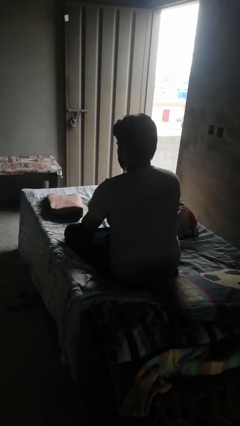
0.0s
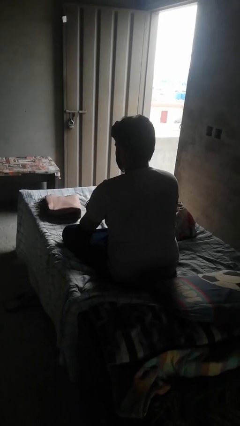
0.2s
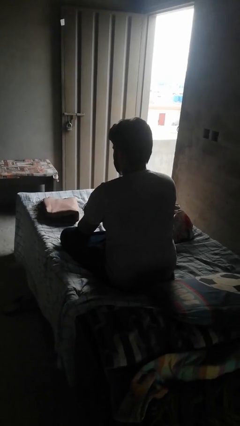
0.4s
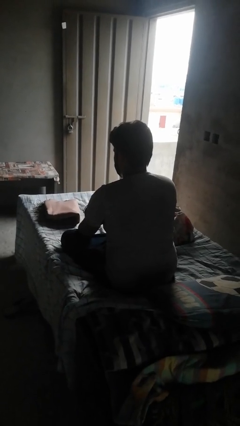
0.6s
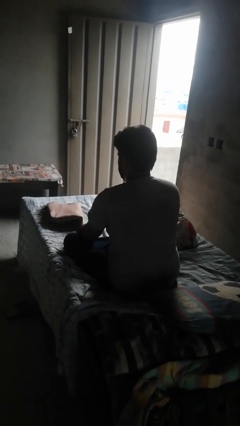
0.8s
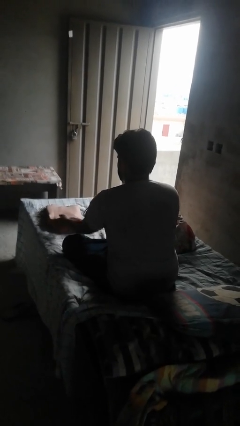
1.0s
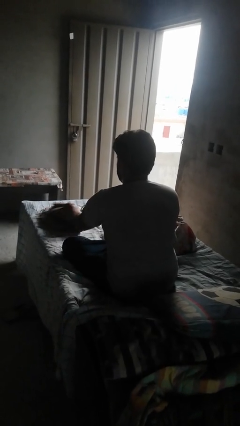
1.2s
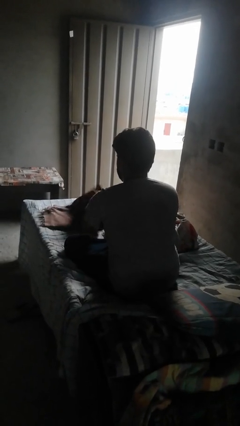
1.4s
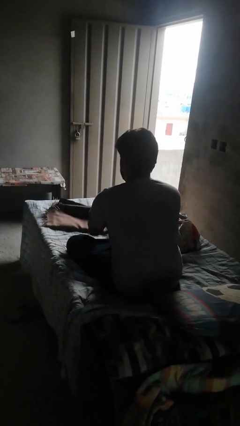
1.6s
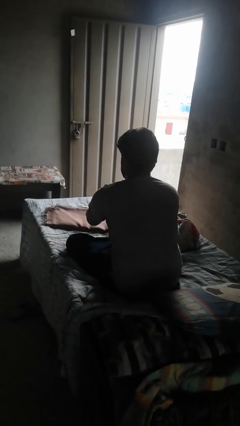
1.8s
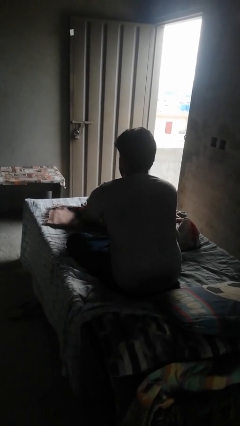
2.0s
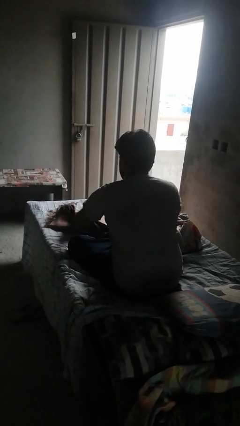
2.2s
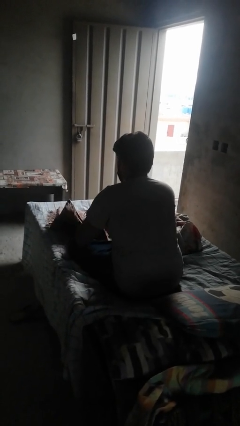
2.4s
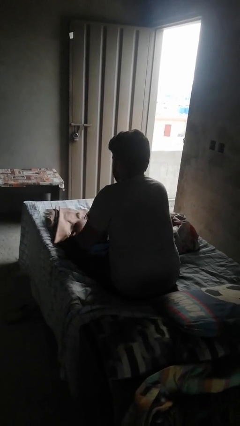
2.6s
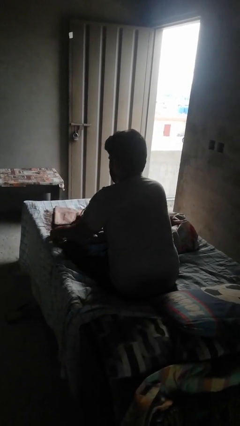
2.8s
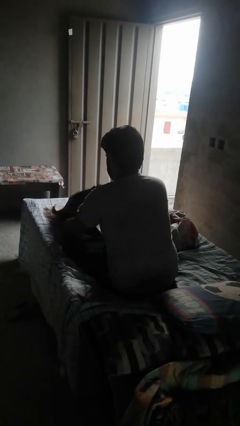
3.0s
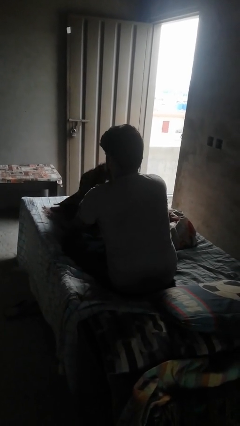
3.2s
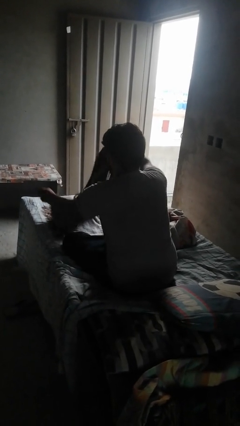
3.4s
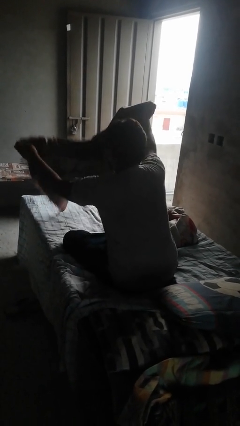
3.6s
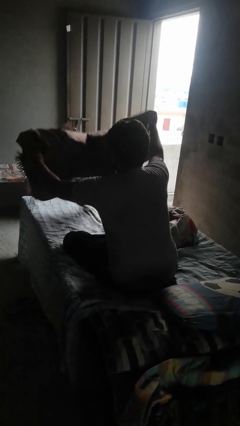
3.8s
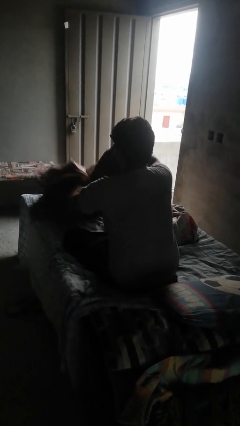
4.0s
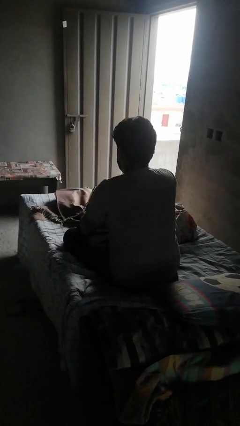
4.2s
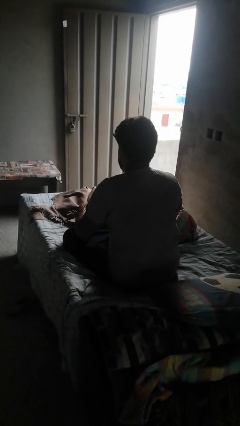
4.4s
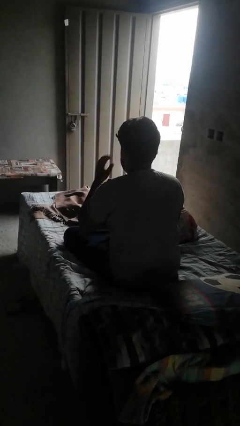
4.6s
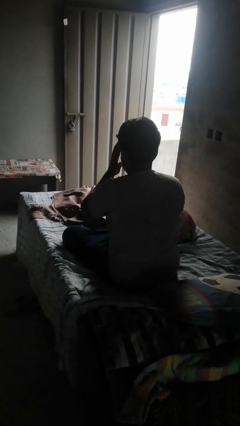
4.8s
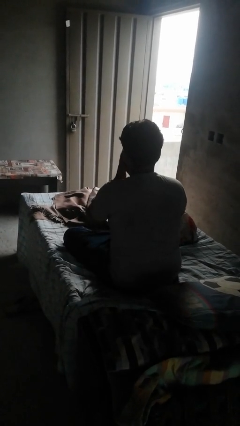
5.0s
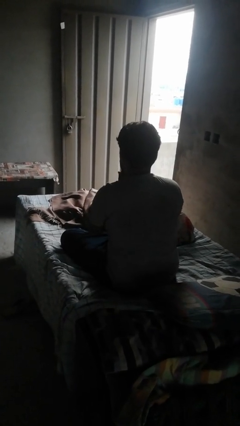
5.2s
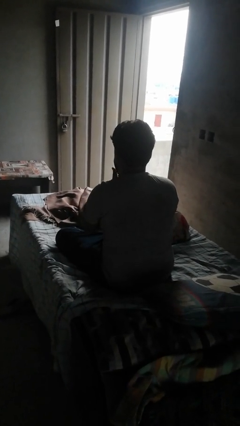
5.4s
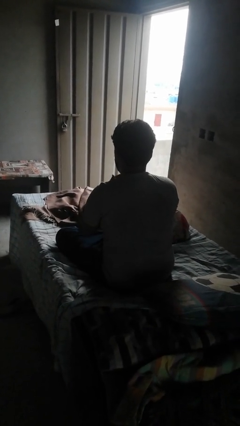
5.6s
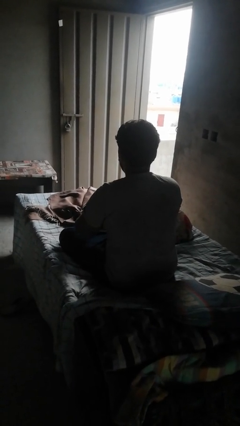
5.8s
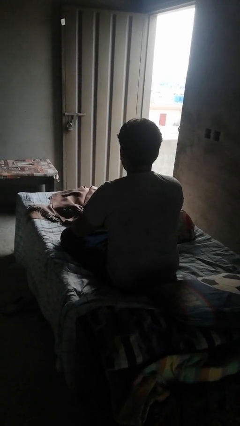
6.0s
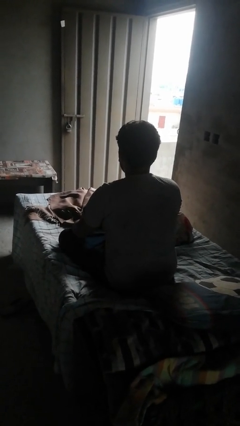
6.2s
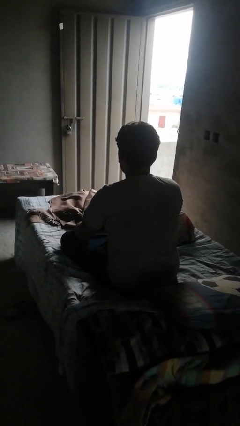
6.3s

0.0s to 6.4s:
person unfolds blanket

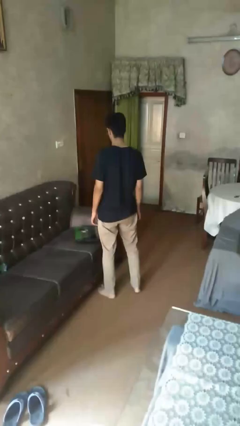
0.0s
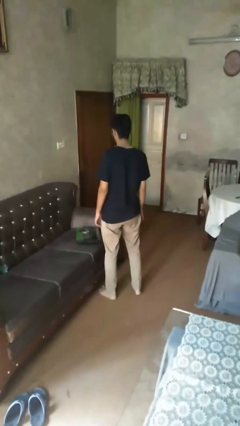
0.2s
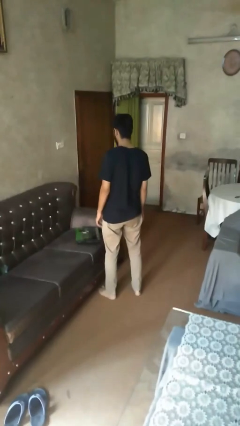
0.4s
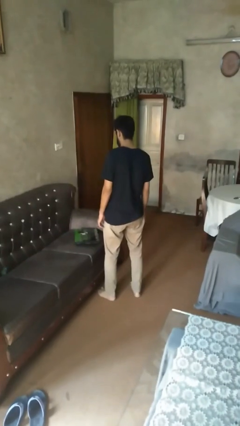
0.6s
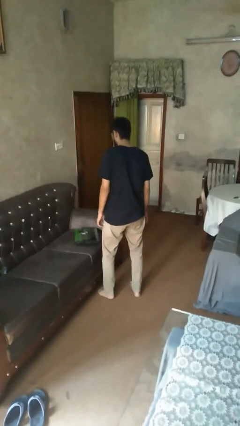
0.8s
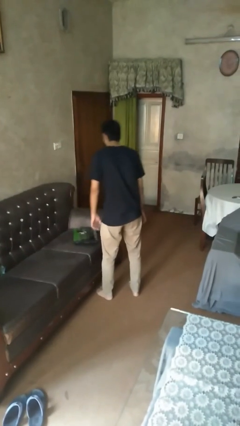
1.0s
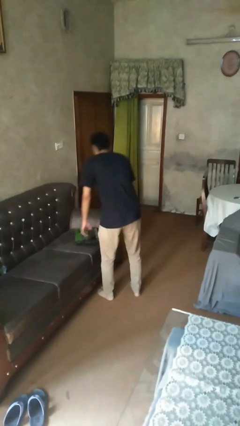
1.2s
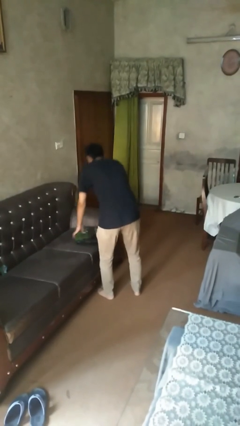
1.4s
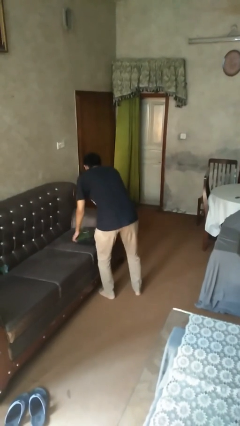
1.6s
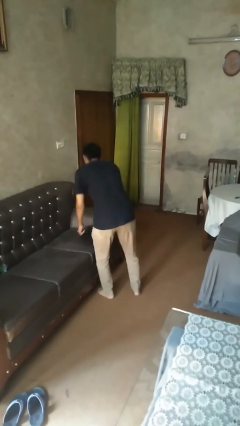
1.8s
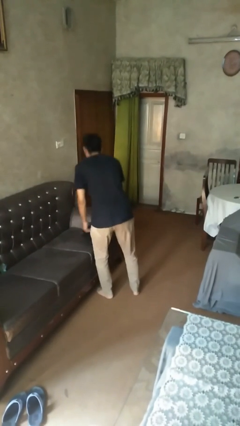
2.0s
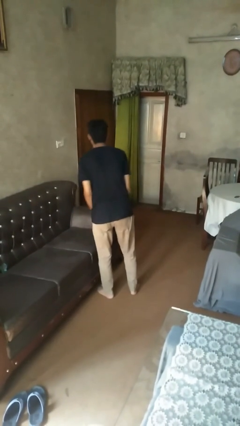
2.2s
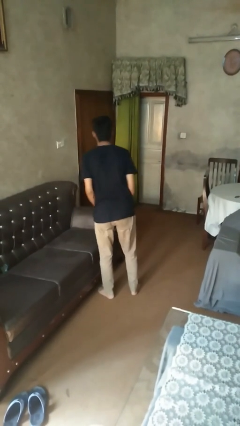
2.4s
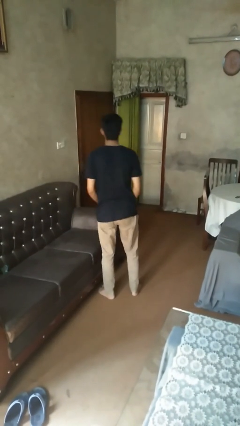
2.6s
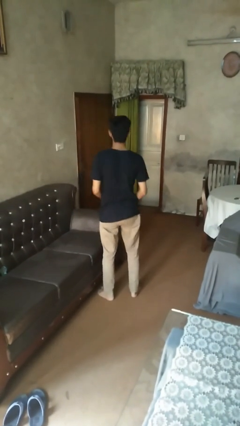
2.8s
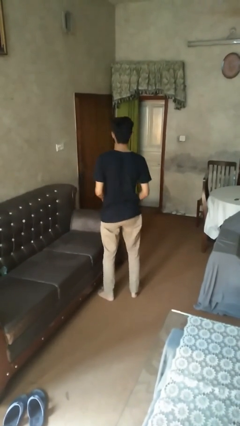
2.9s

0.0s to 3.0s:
person picks up object from couch

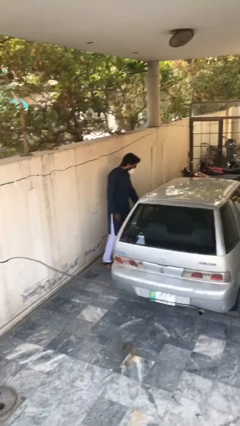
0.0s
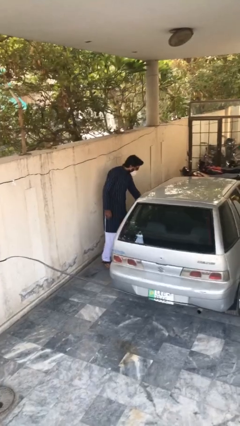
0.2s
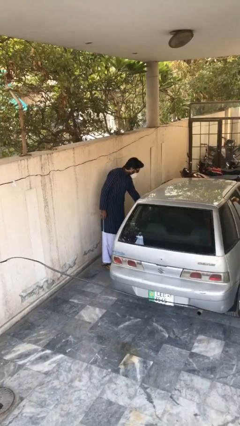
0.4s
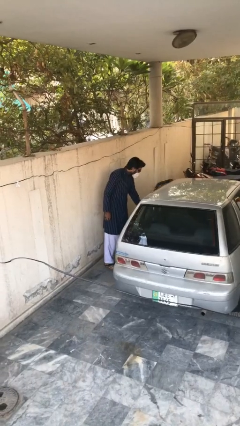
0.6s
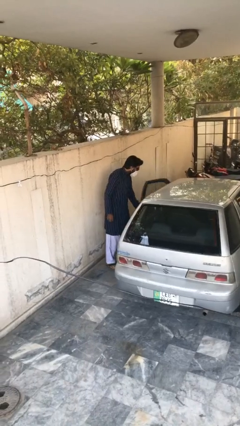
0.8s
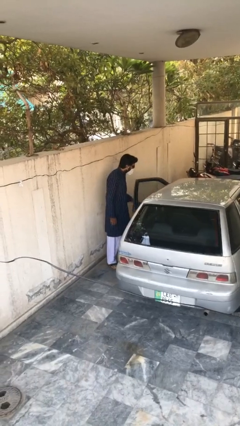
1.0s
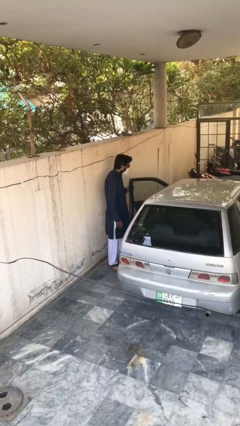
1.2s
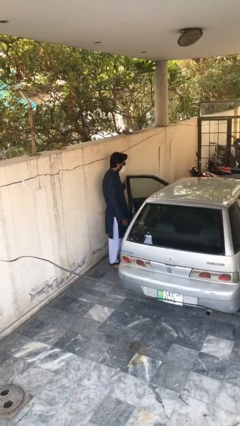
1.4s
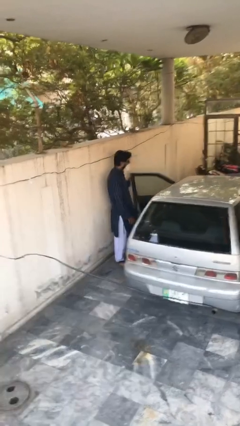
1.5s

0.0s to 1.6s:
person opens car door

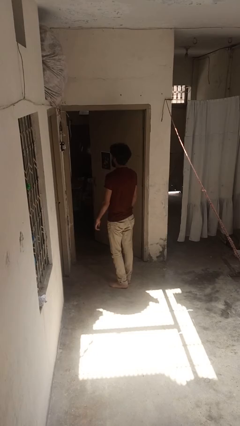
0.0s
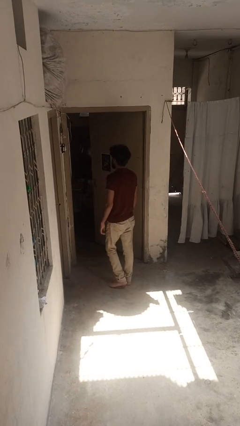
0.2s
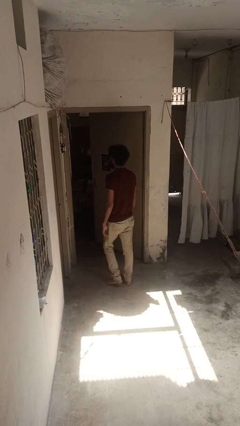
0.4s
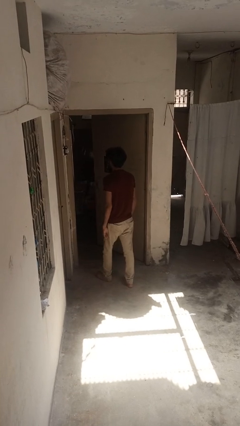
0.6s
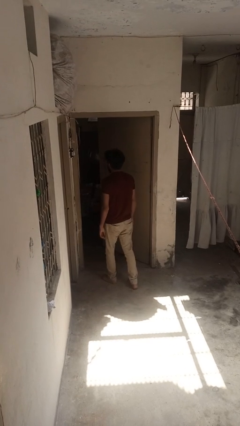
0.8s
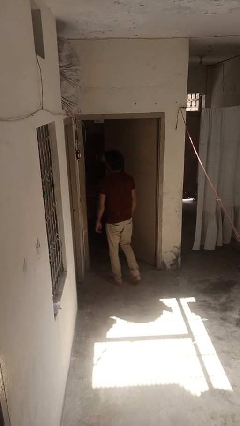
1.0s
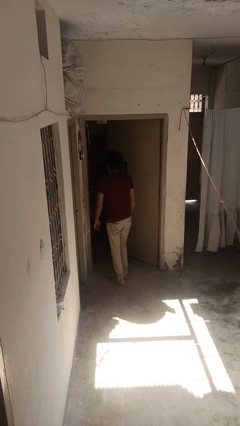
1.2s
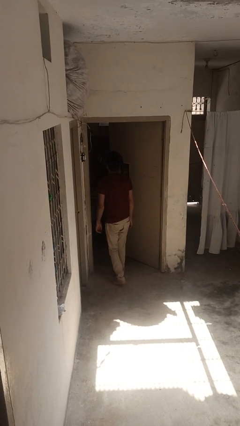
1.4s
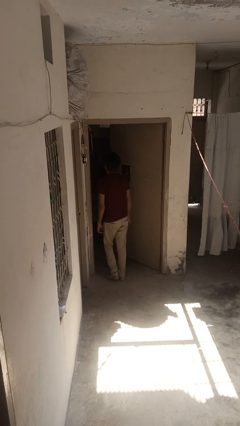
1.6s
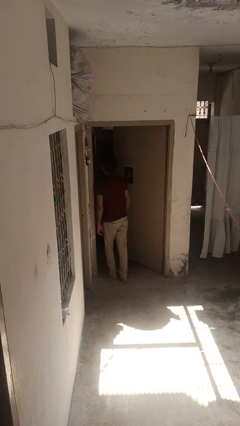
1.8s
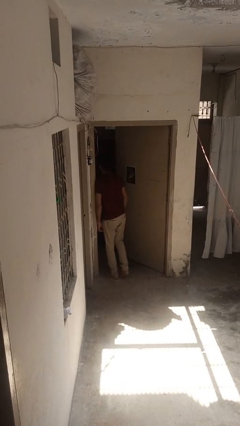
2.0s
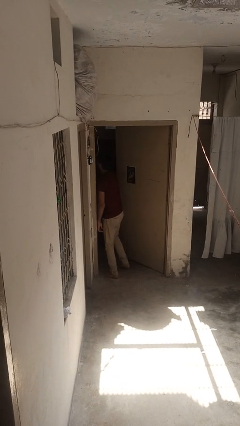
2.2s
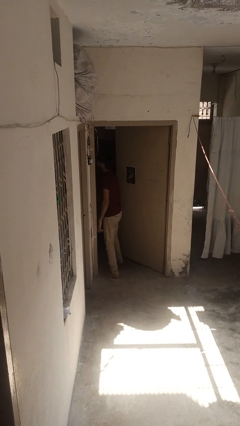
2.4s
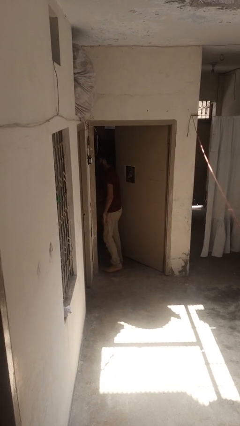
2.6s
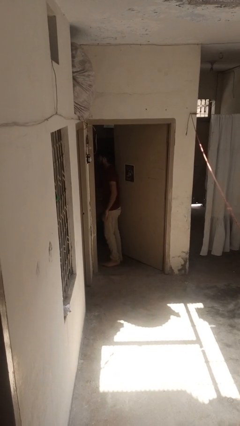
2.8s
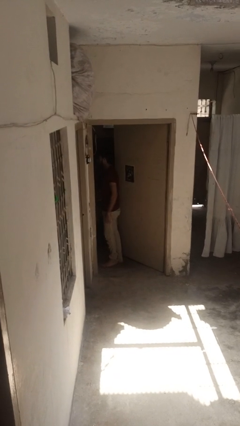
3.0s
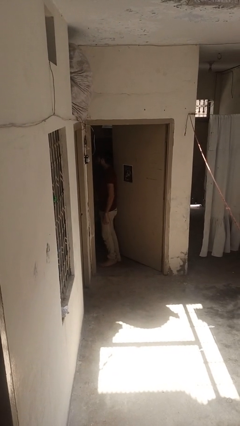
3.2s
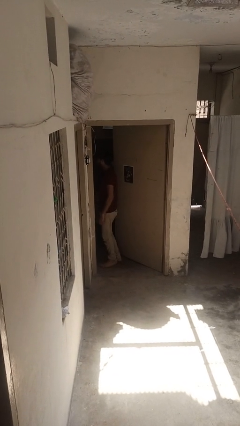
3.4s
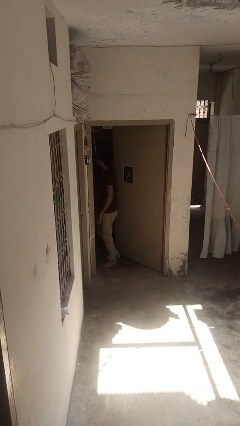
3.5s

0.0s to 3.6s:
person bumps into wall

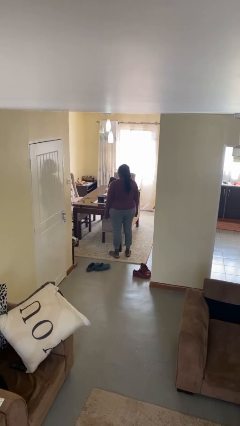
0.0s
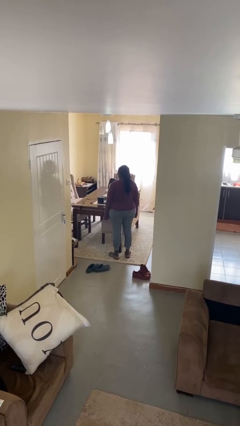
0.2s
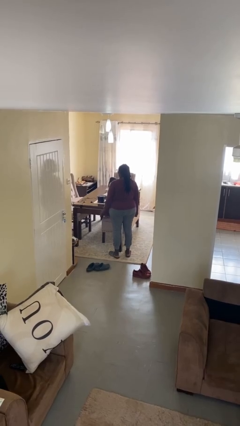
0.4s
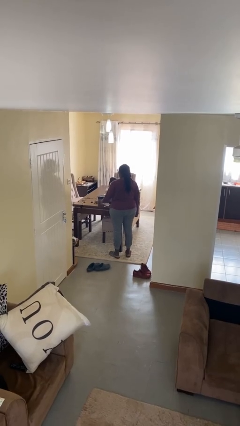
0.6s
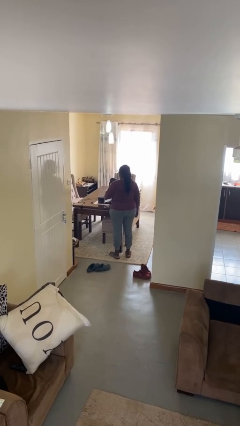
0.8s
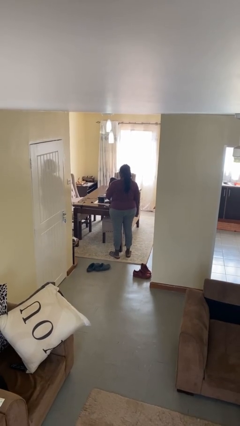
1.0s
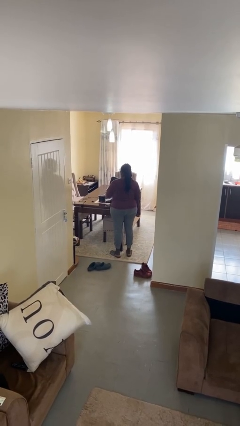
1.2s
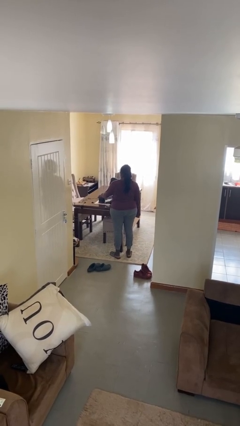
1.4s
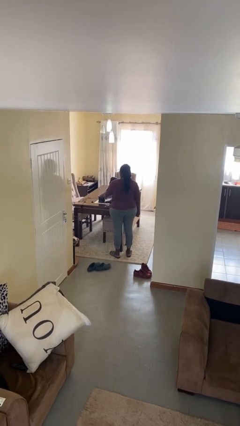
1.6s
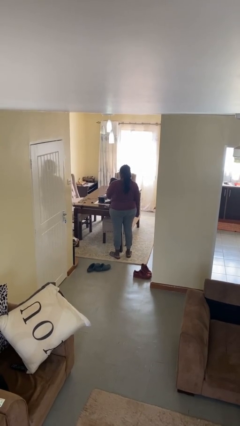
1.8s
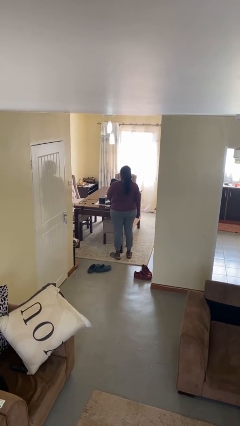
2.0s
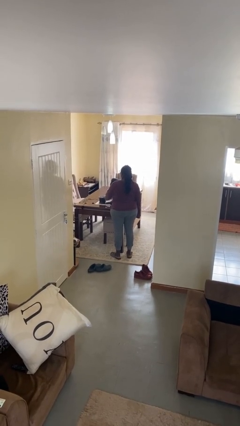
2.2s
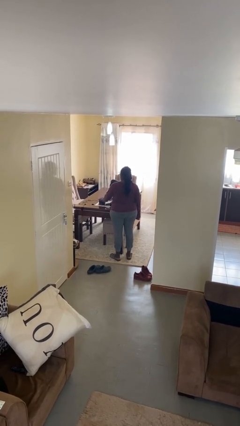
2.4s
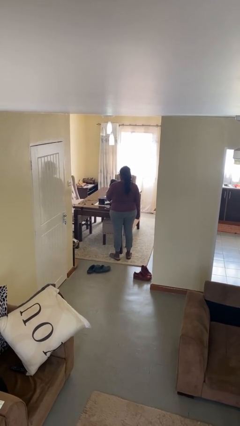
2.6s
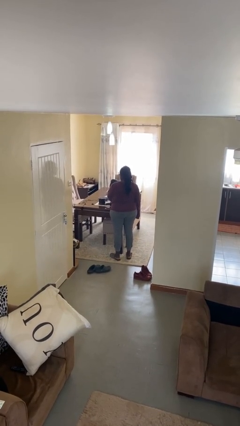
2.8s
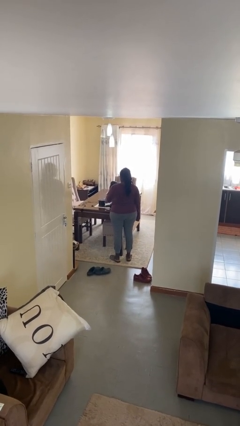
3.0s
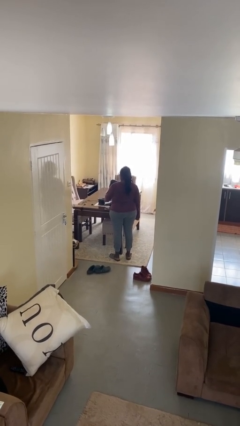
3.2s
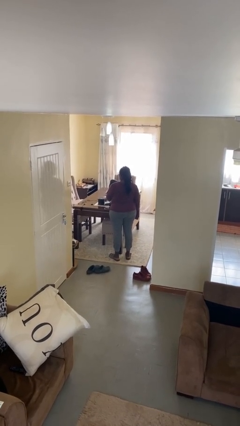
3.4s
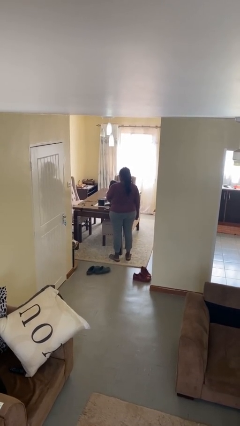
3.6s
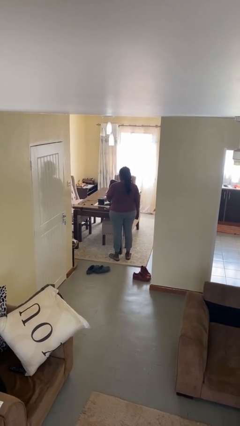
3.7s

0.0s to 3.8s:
person waves hand over object
